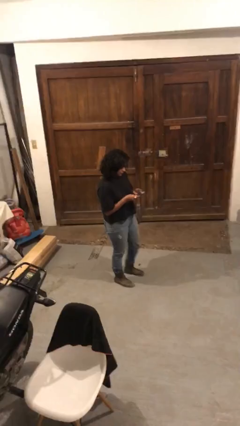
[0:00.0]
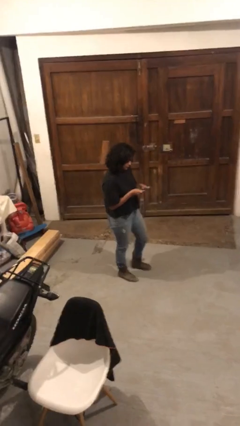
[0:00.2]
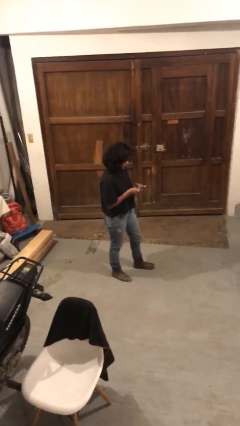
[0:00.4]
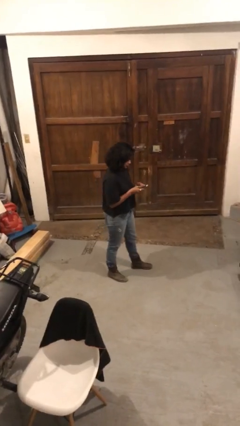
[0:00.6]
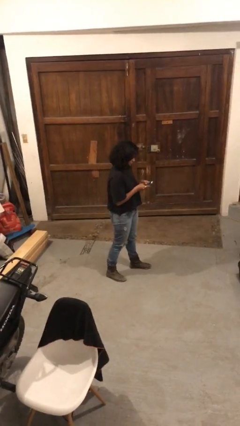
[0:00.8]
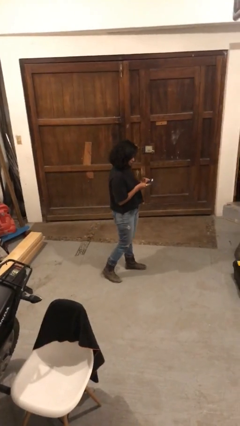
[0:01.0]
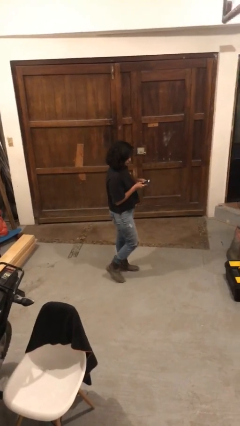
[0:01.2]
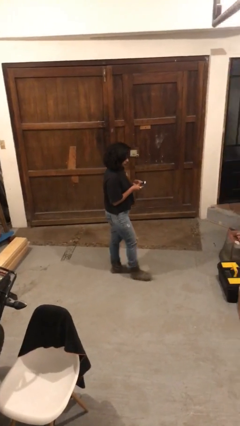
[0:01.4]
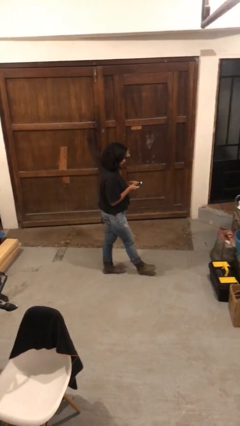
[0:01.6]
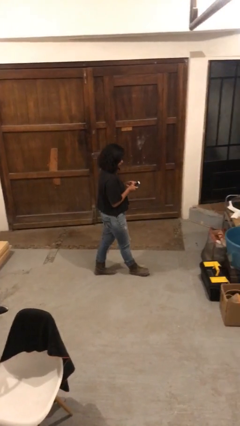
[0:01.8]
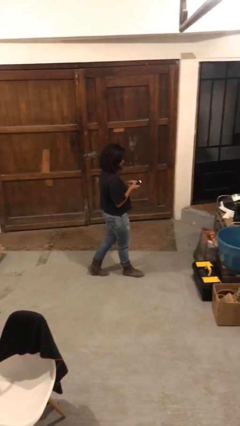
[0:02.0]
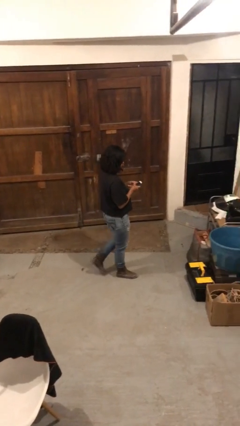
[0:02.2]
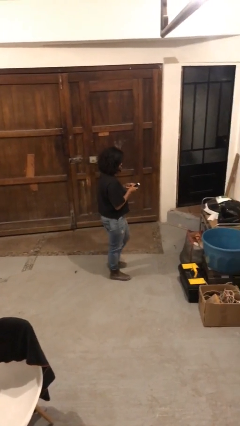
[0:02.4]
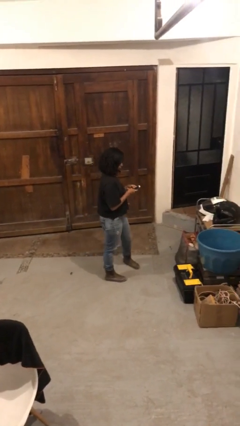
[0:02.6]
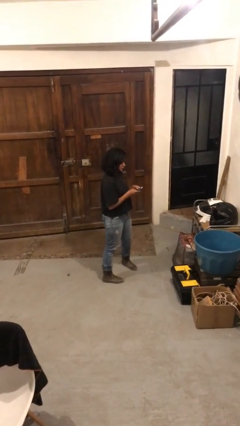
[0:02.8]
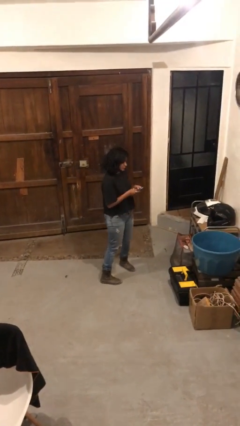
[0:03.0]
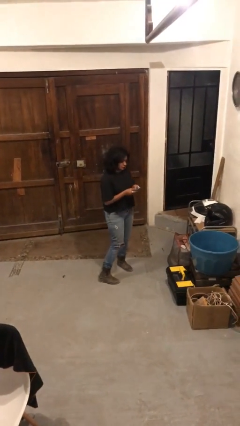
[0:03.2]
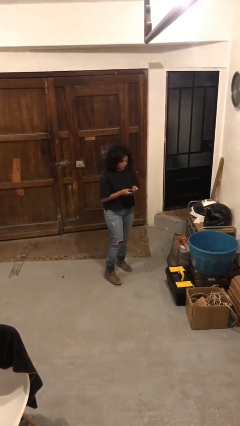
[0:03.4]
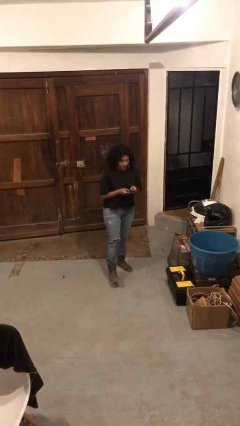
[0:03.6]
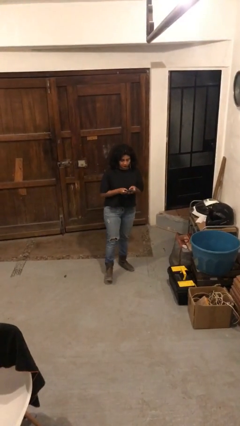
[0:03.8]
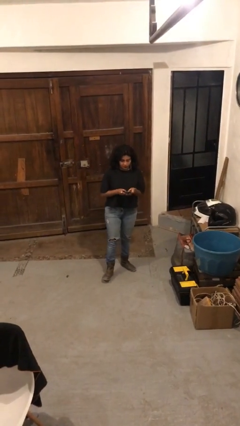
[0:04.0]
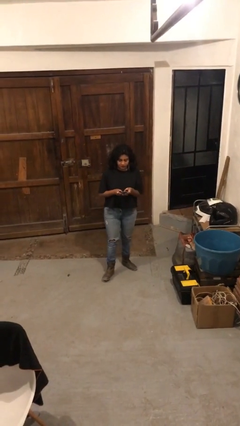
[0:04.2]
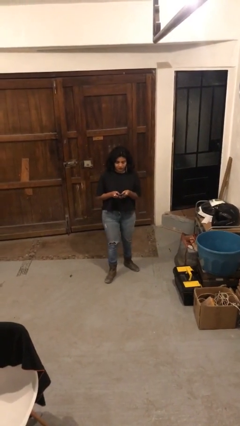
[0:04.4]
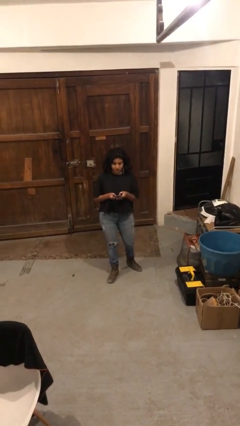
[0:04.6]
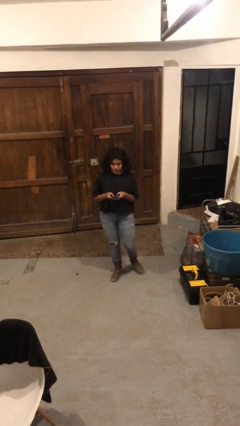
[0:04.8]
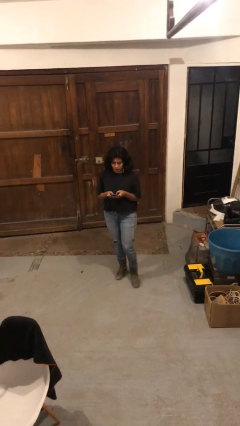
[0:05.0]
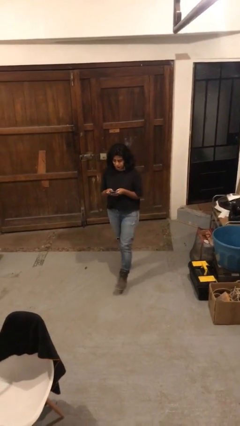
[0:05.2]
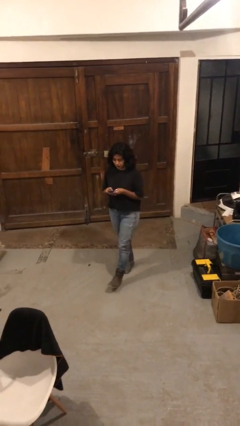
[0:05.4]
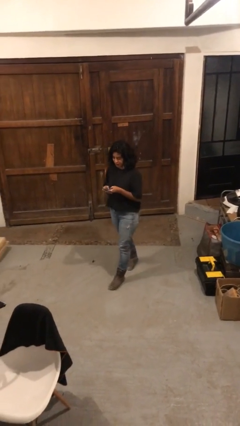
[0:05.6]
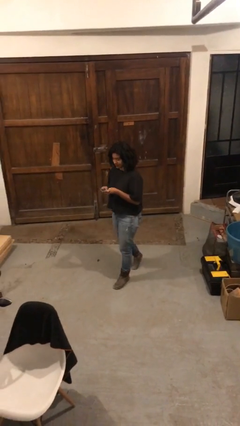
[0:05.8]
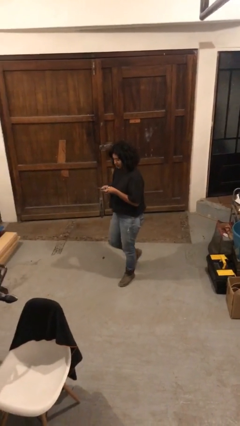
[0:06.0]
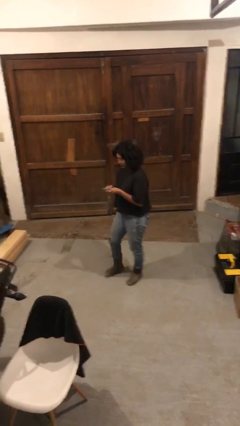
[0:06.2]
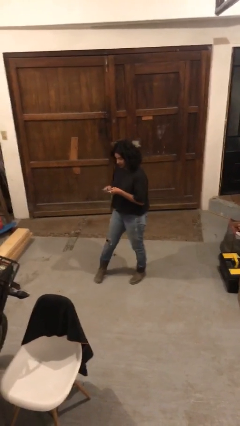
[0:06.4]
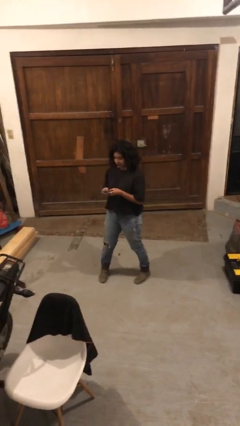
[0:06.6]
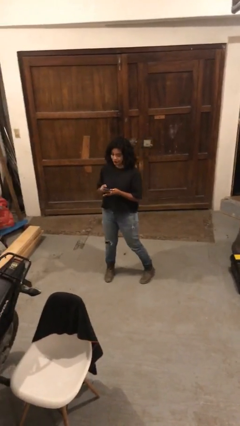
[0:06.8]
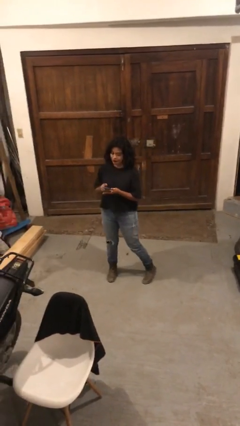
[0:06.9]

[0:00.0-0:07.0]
person texts on phone

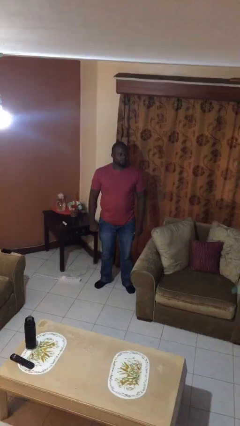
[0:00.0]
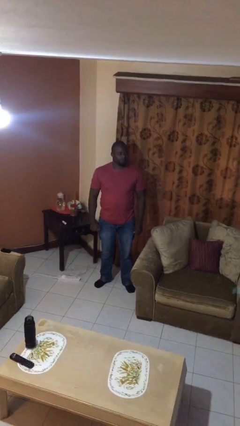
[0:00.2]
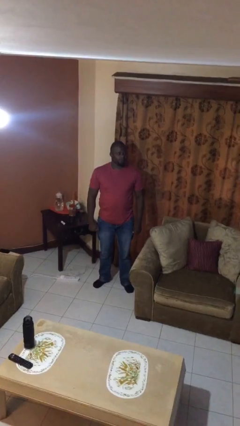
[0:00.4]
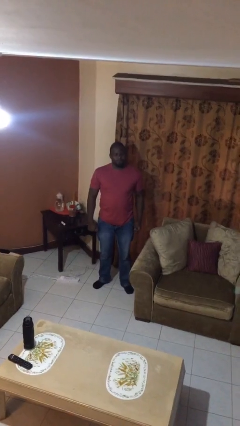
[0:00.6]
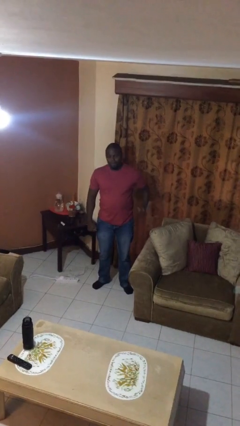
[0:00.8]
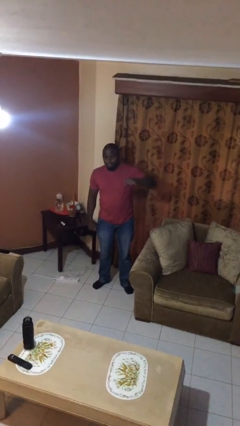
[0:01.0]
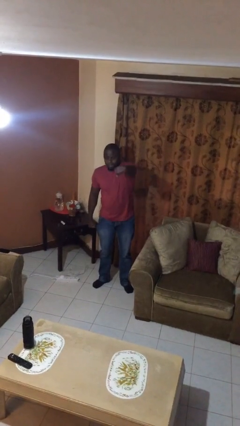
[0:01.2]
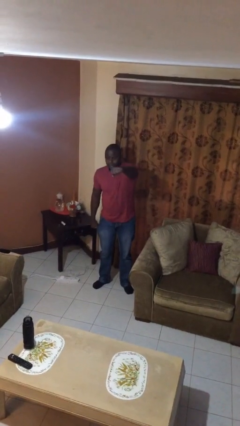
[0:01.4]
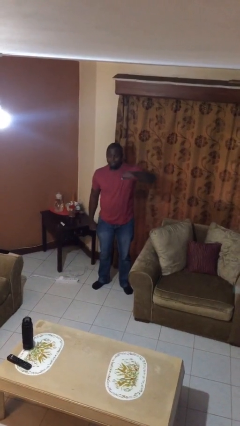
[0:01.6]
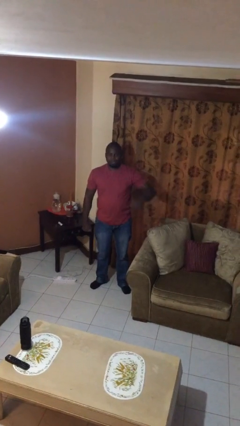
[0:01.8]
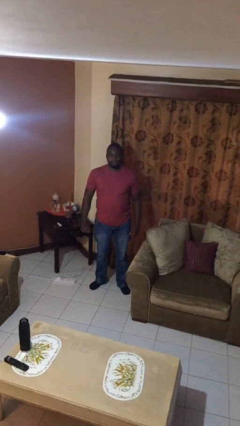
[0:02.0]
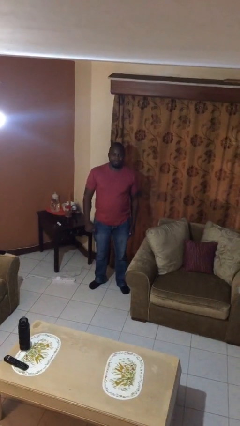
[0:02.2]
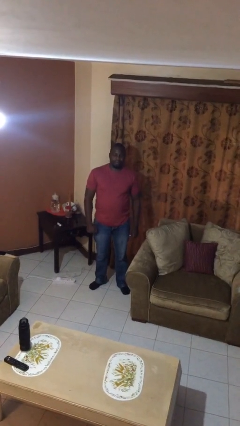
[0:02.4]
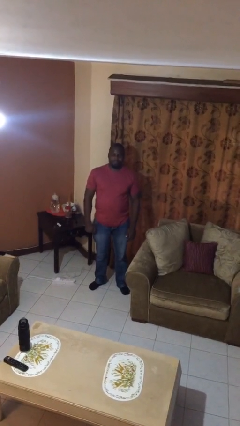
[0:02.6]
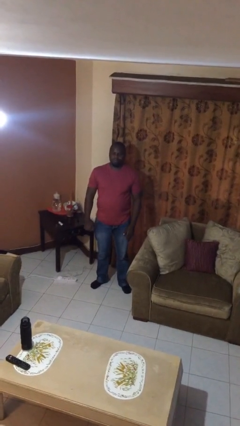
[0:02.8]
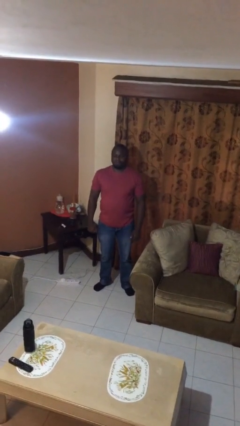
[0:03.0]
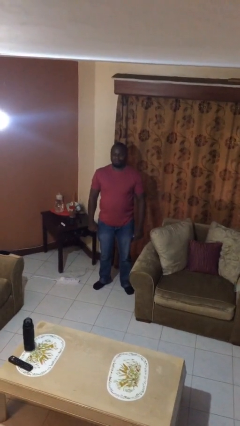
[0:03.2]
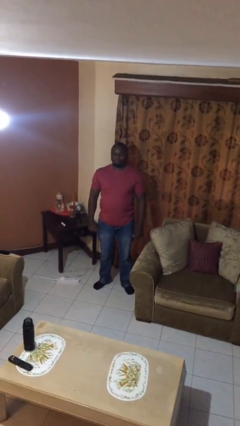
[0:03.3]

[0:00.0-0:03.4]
person punches

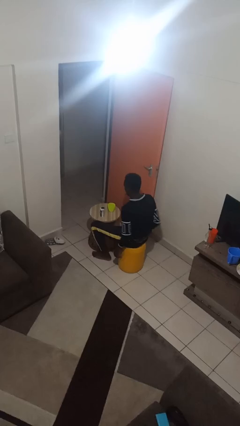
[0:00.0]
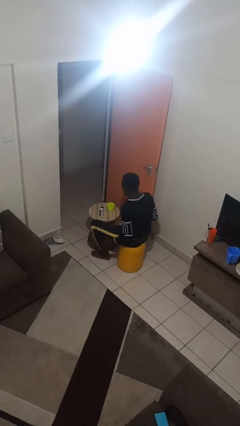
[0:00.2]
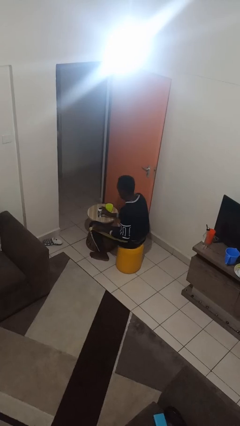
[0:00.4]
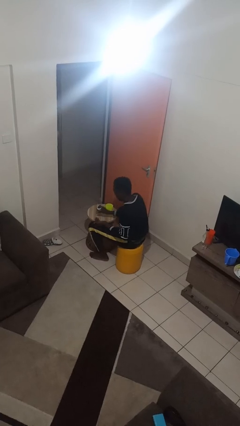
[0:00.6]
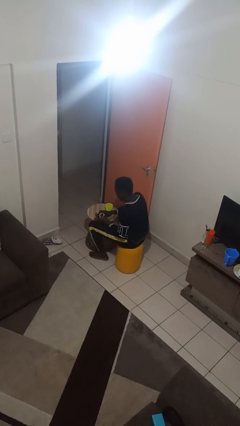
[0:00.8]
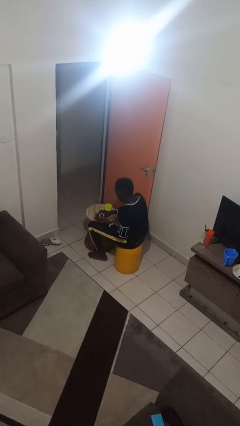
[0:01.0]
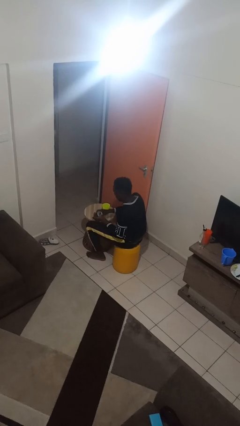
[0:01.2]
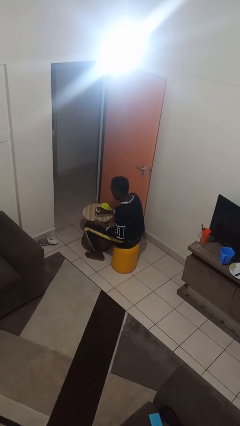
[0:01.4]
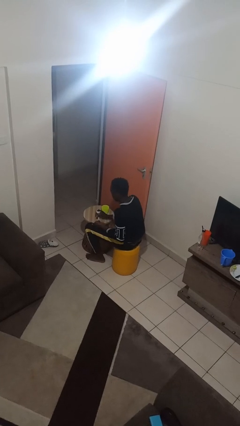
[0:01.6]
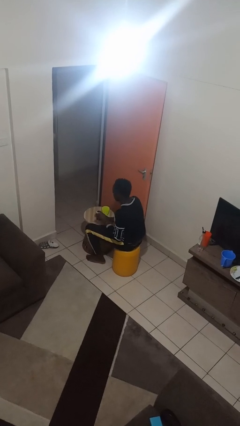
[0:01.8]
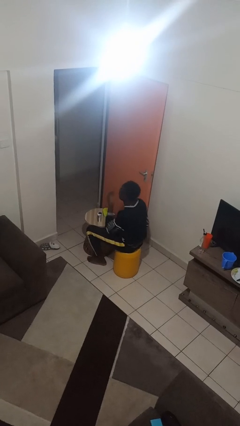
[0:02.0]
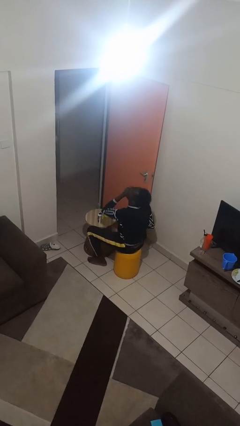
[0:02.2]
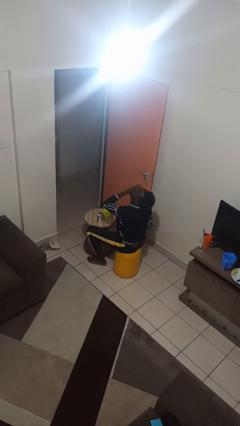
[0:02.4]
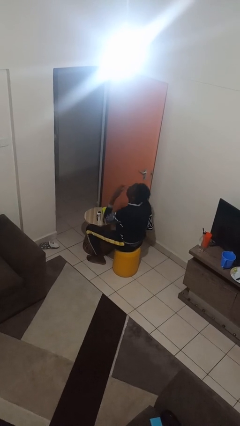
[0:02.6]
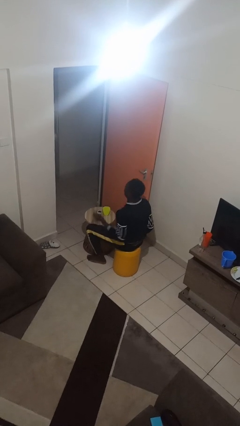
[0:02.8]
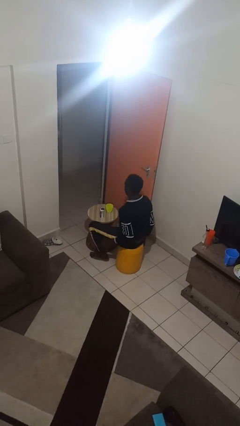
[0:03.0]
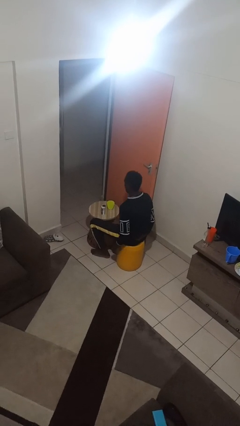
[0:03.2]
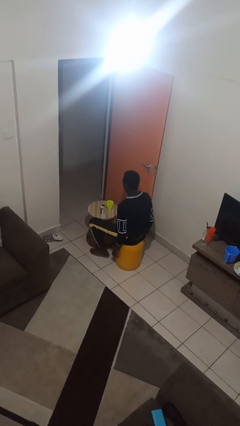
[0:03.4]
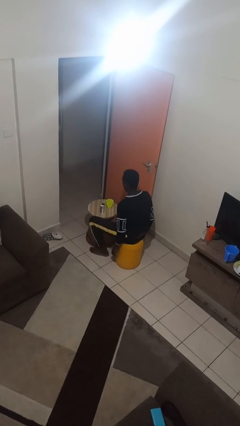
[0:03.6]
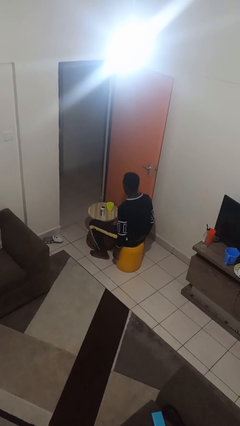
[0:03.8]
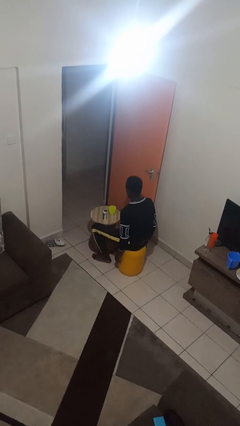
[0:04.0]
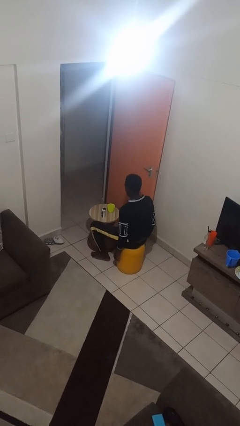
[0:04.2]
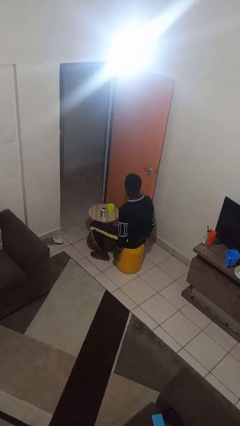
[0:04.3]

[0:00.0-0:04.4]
person takes medicine pills

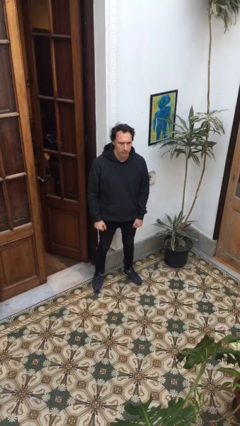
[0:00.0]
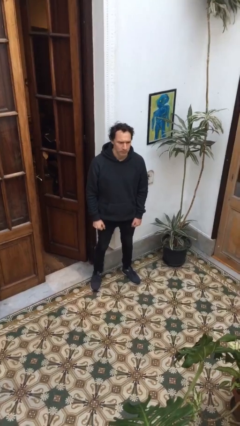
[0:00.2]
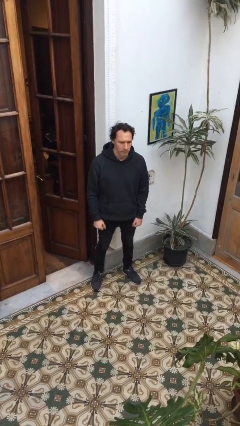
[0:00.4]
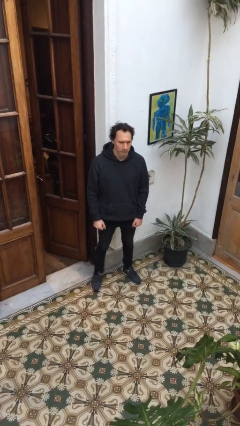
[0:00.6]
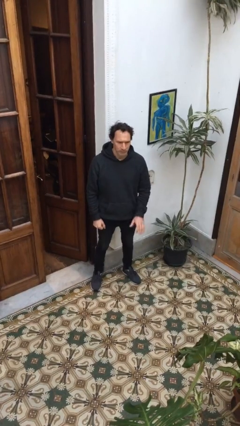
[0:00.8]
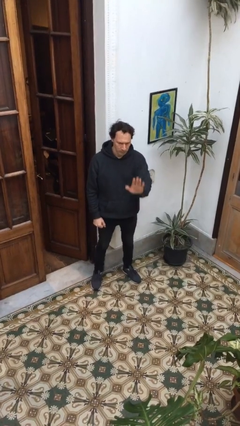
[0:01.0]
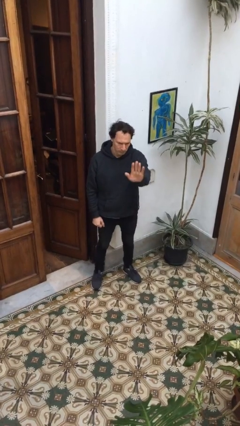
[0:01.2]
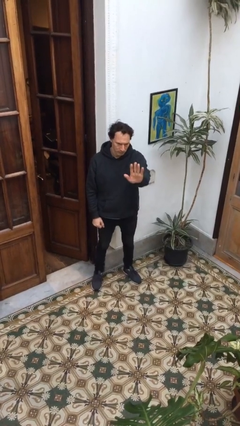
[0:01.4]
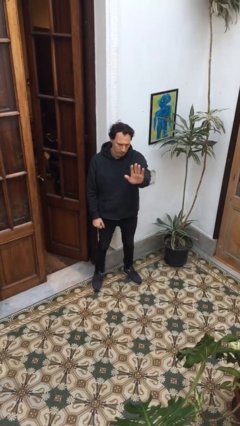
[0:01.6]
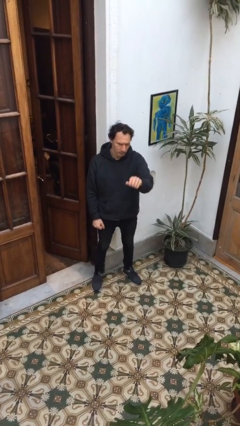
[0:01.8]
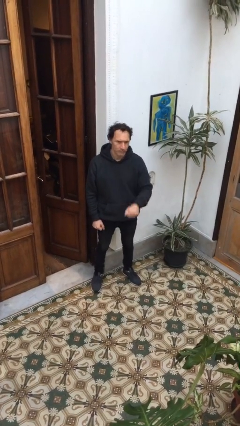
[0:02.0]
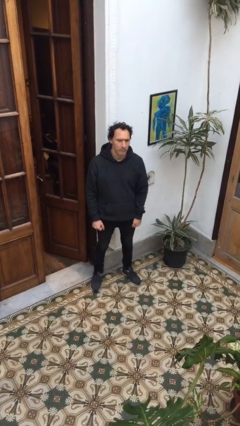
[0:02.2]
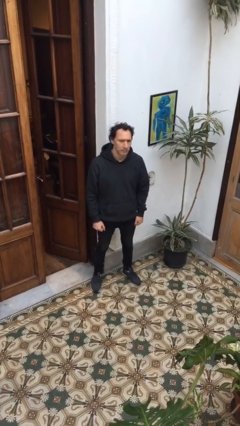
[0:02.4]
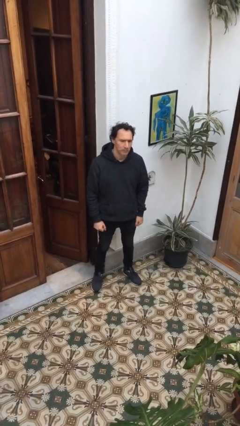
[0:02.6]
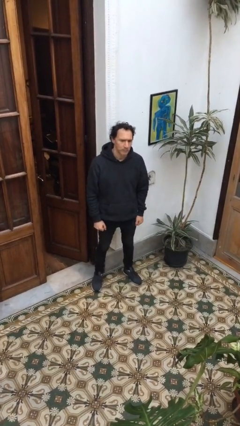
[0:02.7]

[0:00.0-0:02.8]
person gestures stop

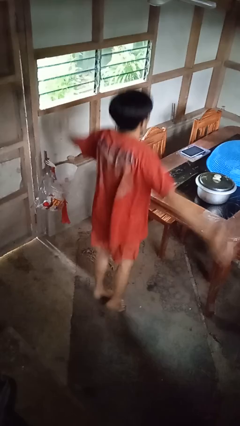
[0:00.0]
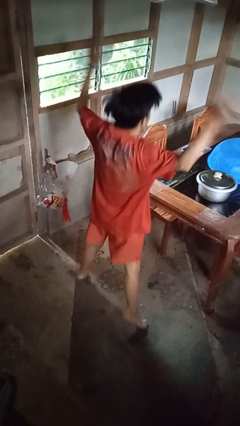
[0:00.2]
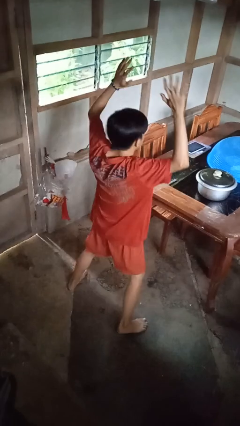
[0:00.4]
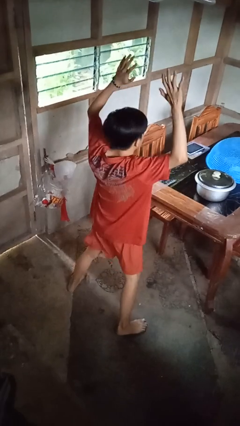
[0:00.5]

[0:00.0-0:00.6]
person exercises with jumping jacks
